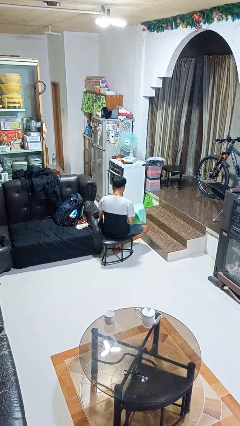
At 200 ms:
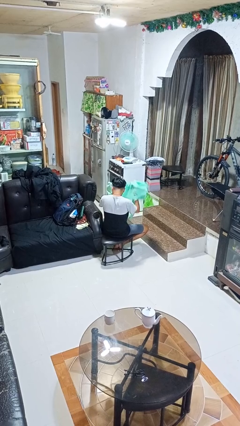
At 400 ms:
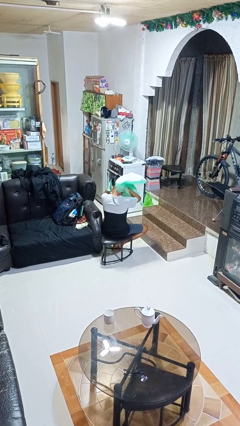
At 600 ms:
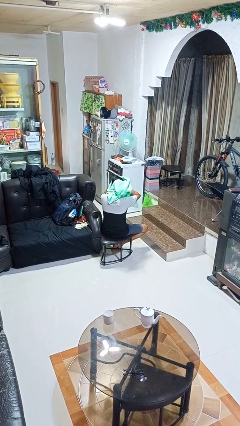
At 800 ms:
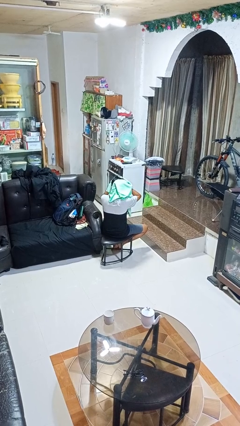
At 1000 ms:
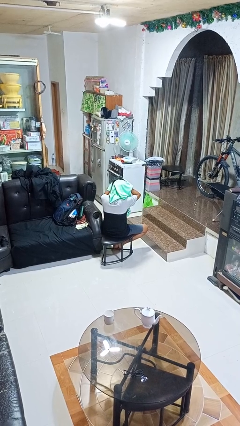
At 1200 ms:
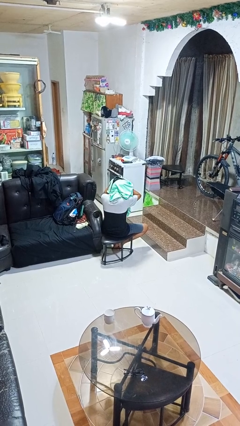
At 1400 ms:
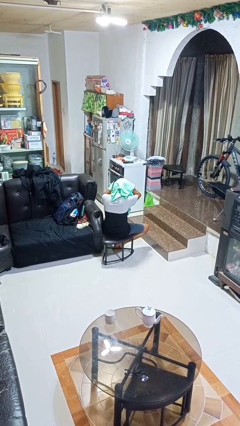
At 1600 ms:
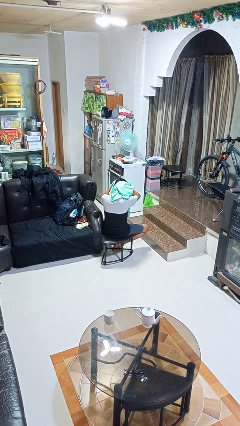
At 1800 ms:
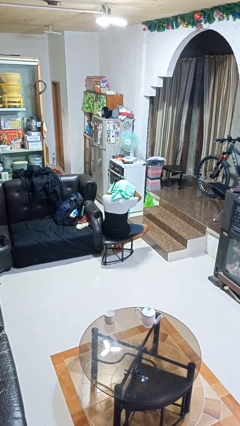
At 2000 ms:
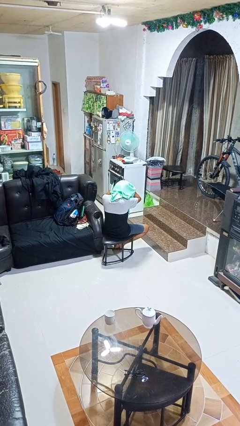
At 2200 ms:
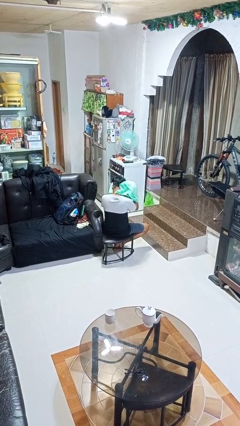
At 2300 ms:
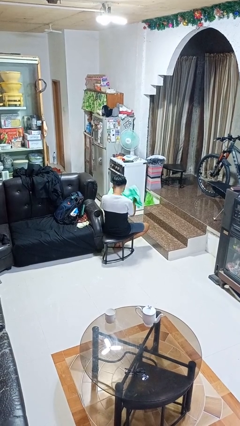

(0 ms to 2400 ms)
person dries hair with towel

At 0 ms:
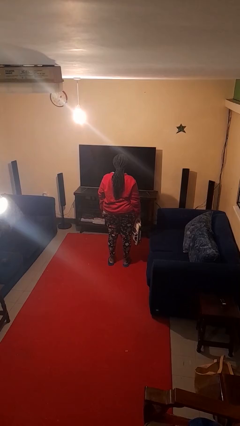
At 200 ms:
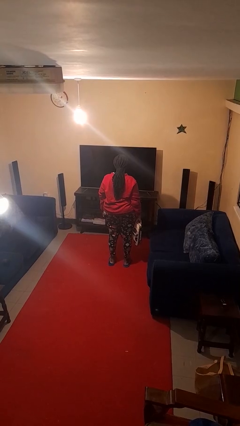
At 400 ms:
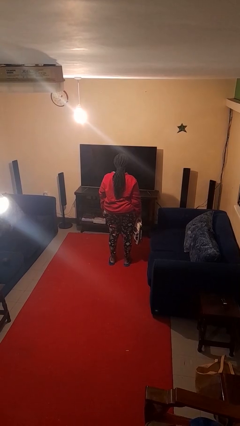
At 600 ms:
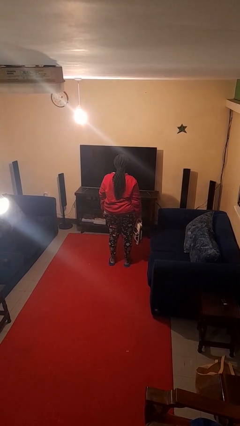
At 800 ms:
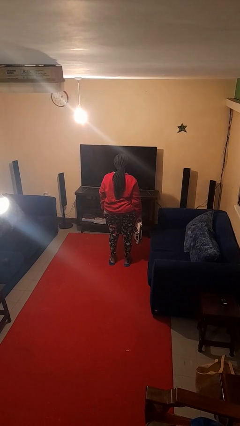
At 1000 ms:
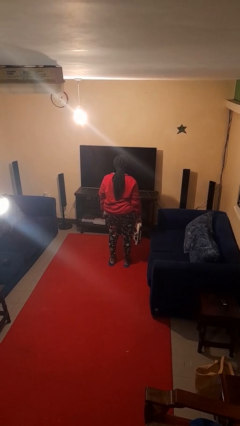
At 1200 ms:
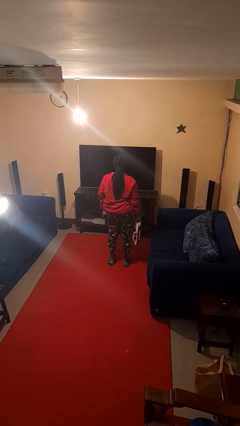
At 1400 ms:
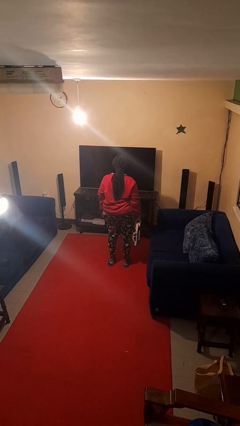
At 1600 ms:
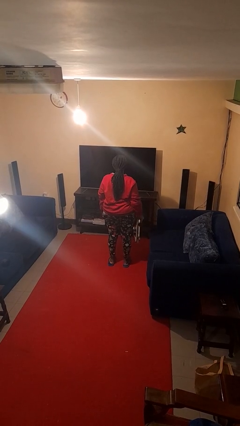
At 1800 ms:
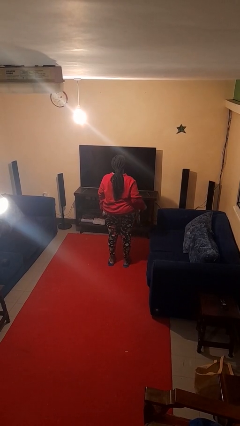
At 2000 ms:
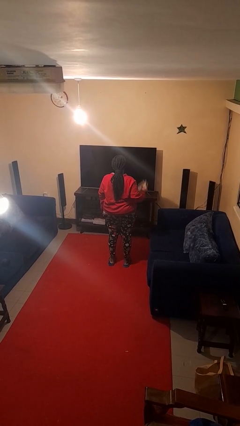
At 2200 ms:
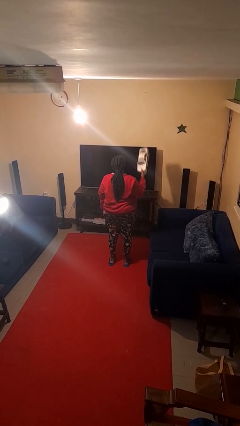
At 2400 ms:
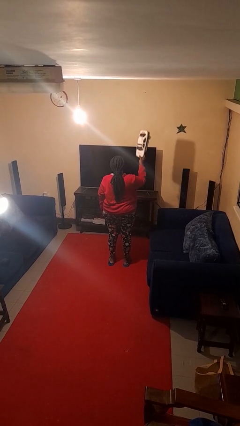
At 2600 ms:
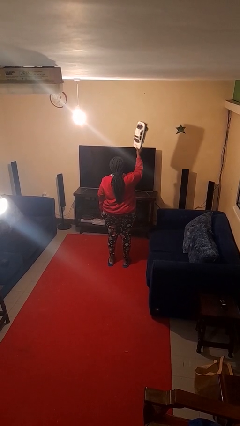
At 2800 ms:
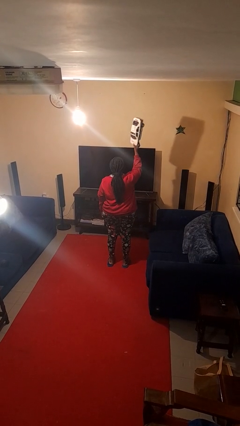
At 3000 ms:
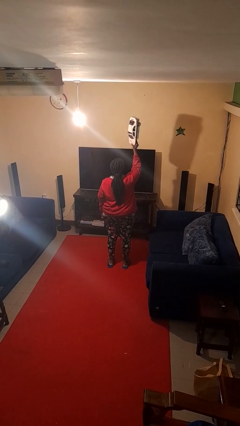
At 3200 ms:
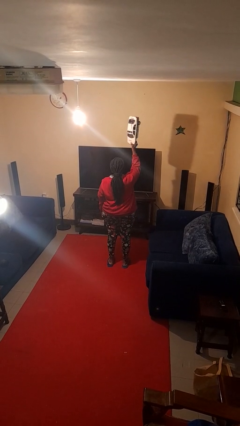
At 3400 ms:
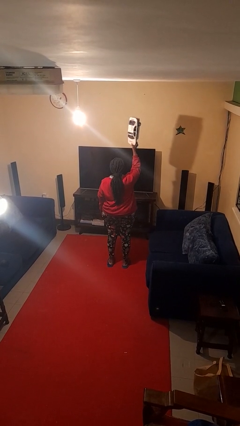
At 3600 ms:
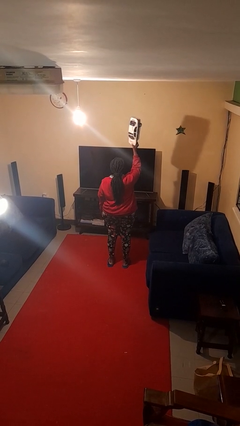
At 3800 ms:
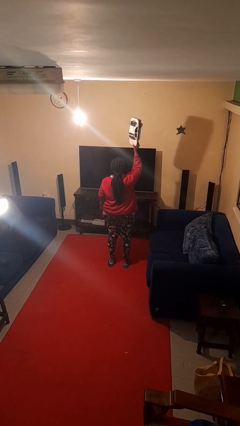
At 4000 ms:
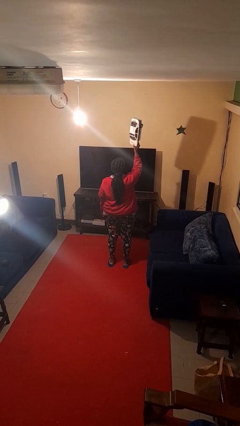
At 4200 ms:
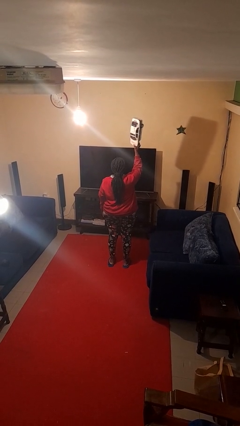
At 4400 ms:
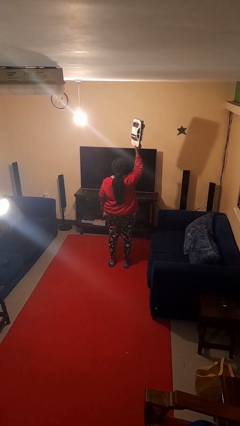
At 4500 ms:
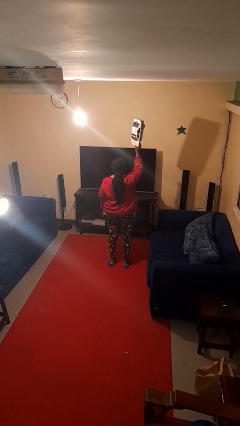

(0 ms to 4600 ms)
person holds object above head

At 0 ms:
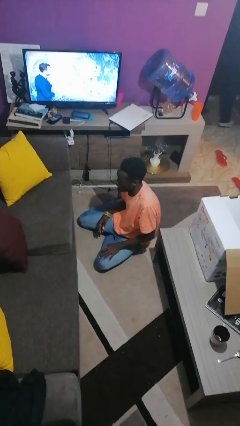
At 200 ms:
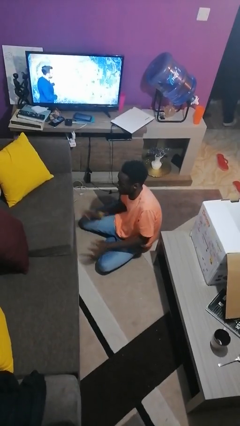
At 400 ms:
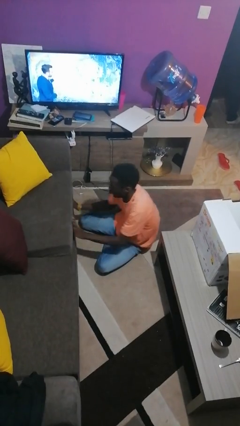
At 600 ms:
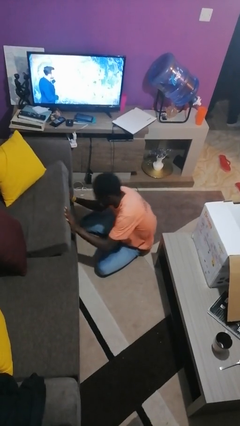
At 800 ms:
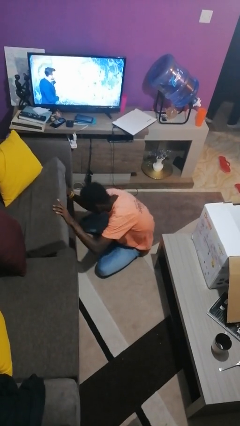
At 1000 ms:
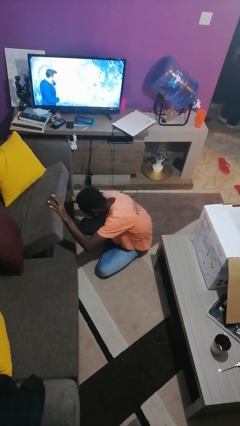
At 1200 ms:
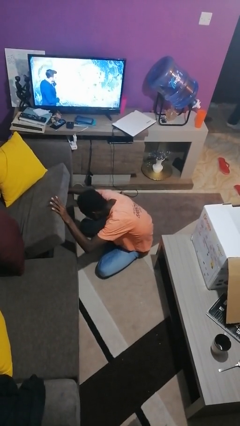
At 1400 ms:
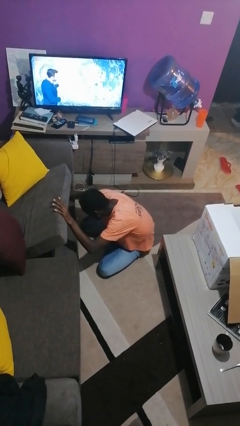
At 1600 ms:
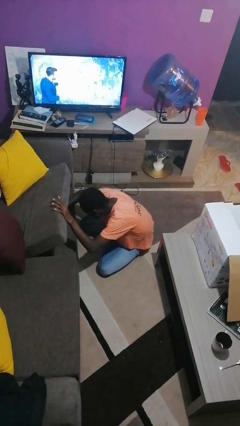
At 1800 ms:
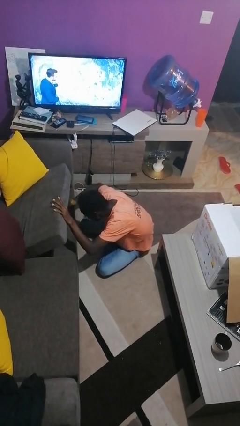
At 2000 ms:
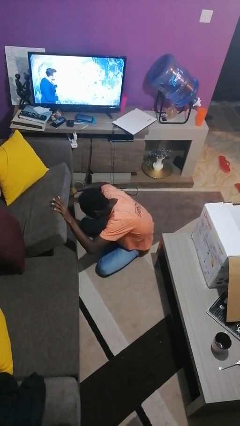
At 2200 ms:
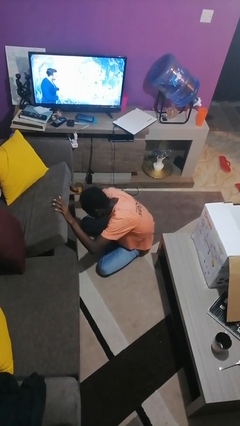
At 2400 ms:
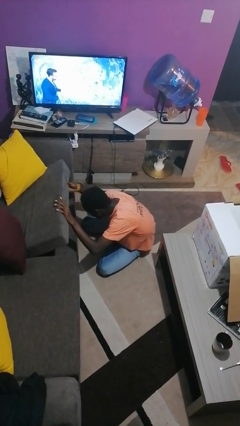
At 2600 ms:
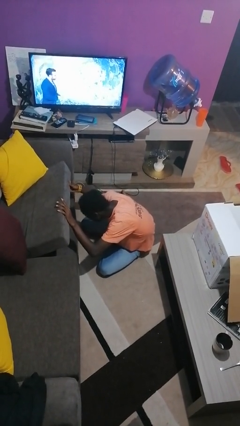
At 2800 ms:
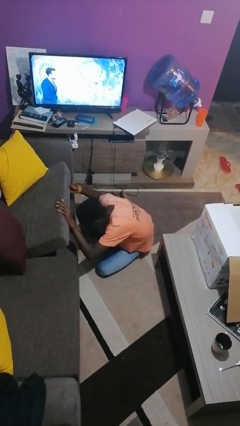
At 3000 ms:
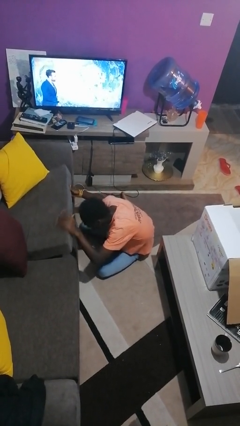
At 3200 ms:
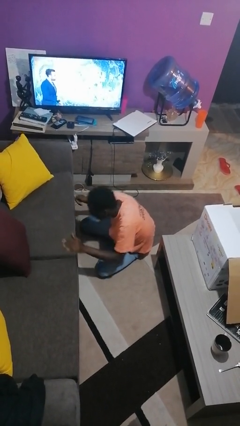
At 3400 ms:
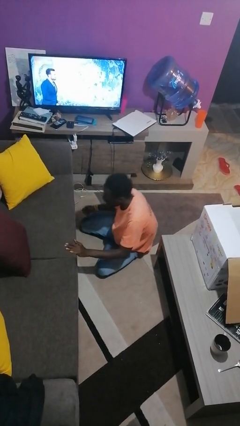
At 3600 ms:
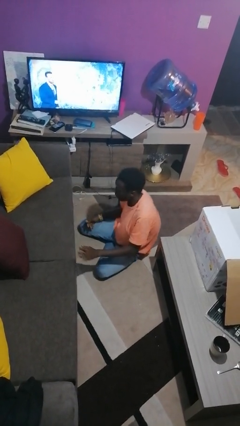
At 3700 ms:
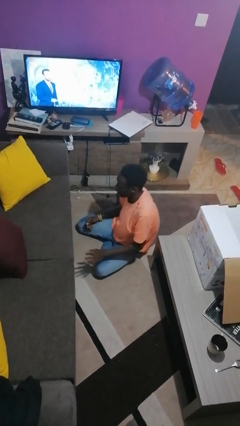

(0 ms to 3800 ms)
person searches under couch

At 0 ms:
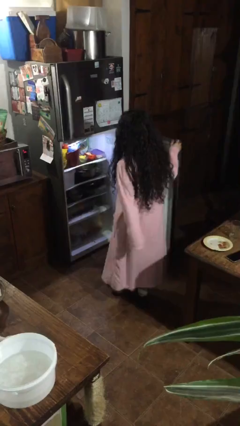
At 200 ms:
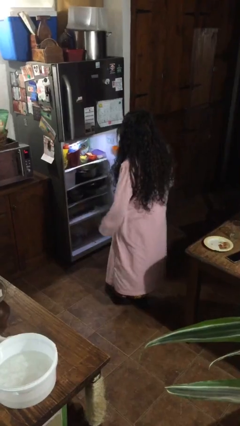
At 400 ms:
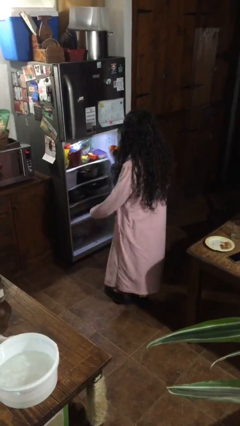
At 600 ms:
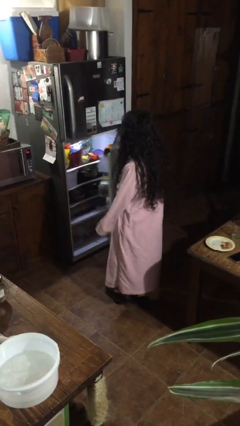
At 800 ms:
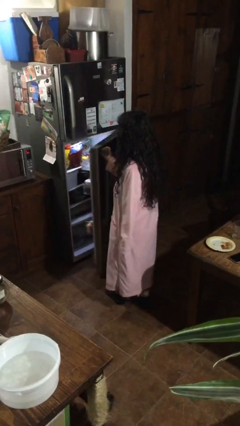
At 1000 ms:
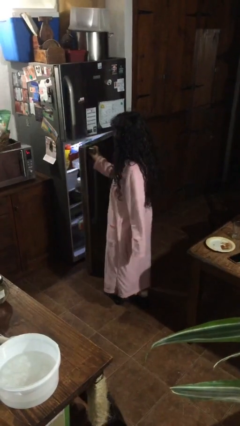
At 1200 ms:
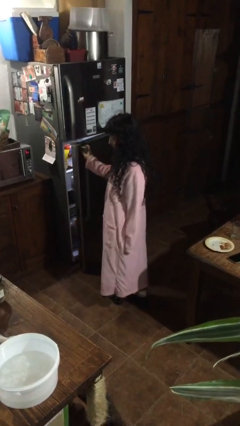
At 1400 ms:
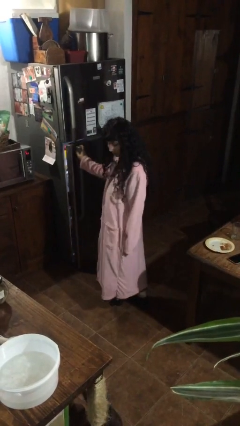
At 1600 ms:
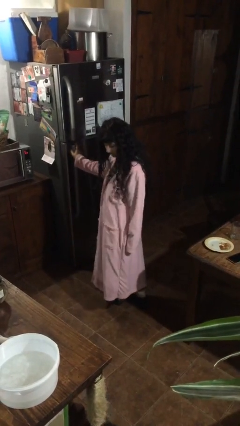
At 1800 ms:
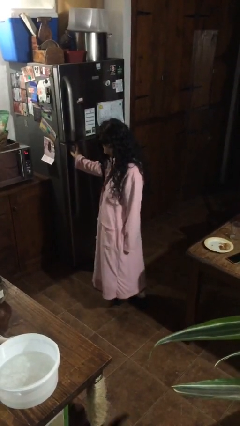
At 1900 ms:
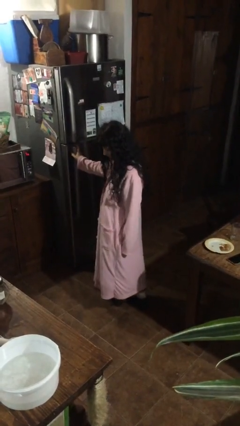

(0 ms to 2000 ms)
person closes refrigerator

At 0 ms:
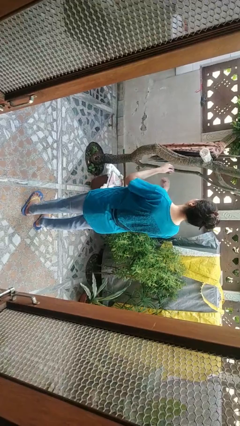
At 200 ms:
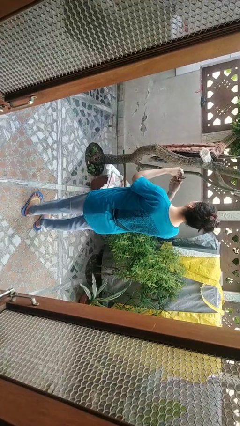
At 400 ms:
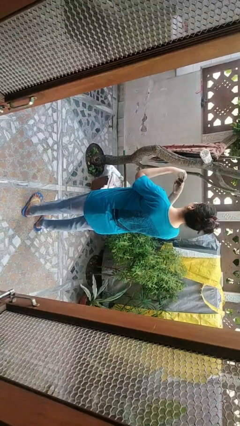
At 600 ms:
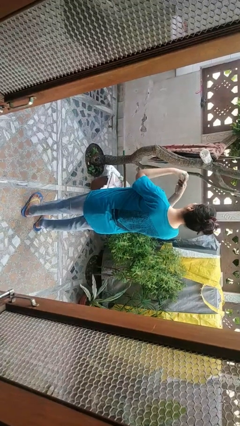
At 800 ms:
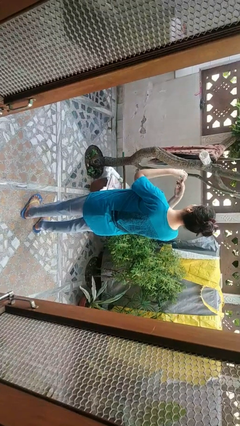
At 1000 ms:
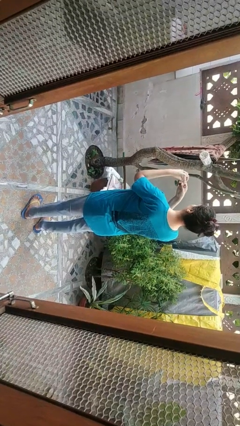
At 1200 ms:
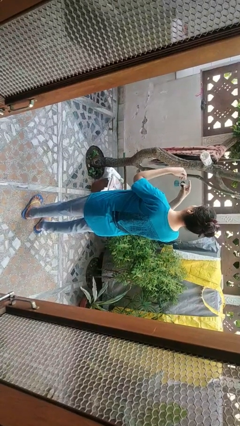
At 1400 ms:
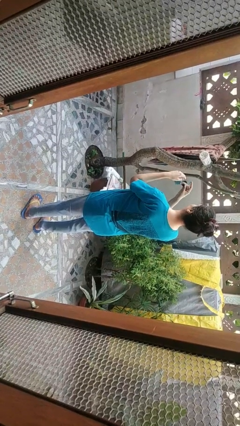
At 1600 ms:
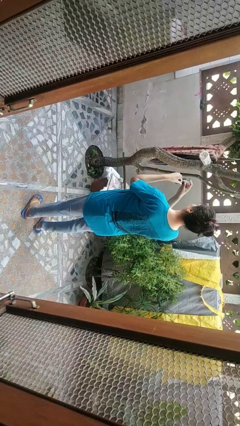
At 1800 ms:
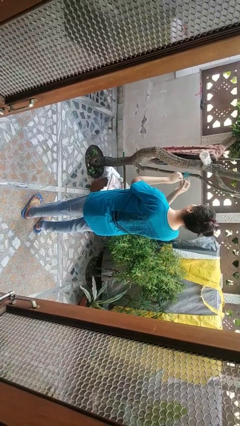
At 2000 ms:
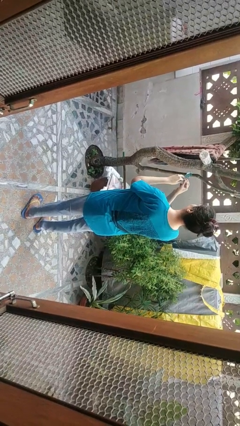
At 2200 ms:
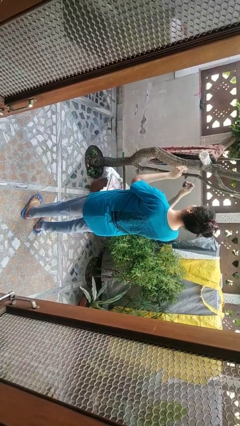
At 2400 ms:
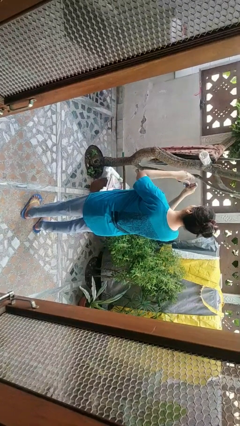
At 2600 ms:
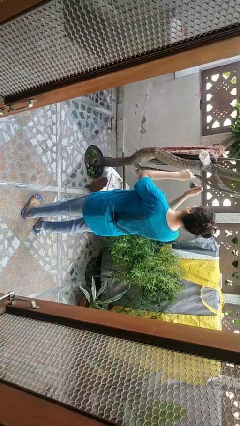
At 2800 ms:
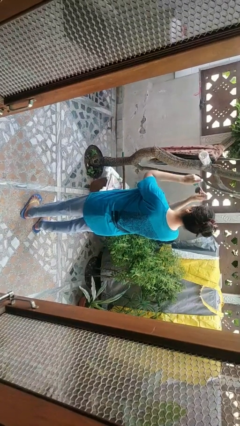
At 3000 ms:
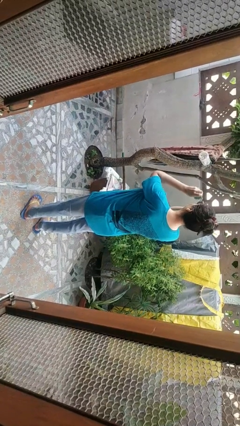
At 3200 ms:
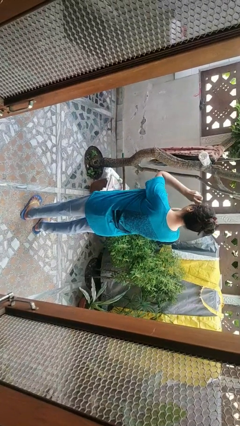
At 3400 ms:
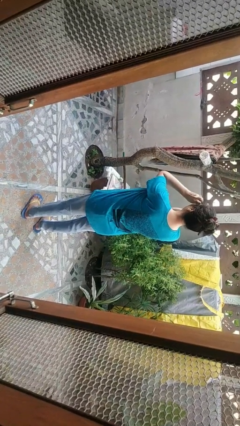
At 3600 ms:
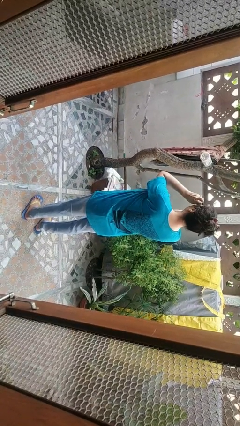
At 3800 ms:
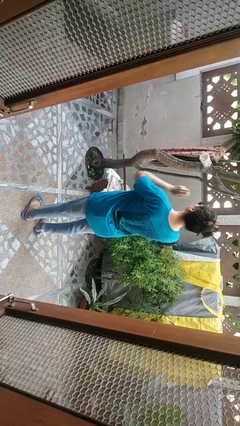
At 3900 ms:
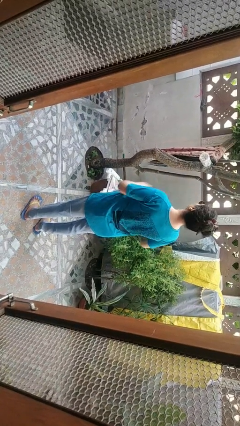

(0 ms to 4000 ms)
person puts on sunglasses

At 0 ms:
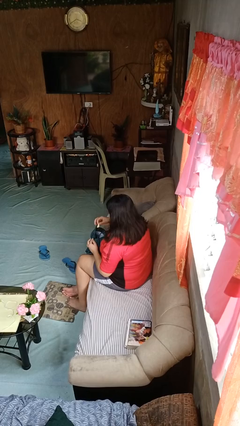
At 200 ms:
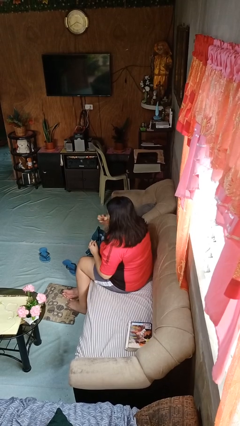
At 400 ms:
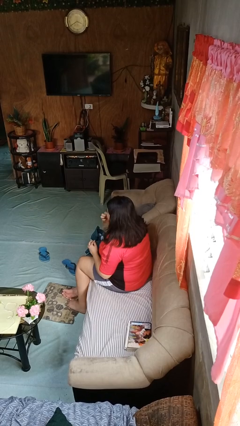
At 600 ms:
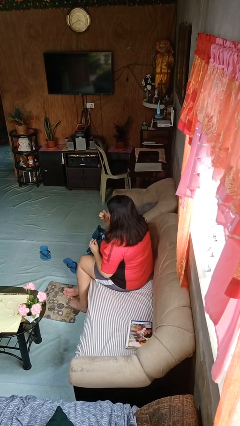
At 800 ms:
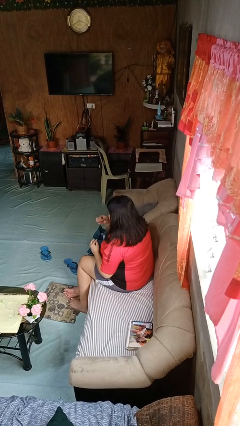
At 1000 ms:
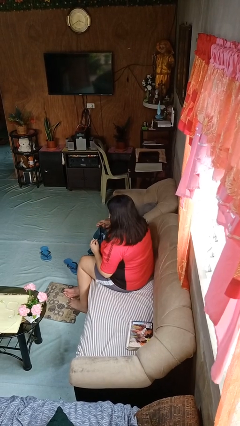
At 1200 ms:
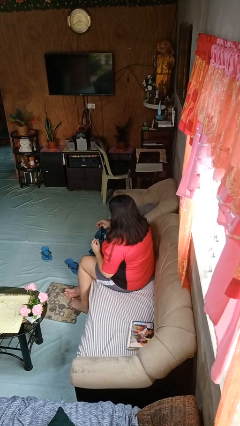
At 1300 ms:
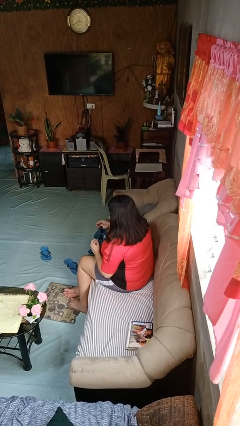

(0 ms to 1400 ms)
person eats snack from bag
